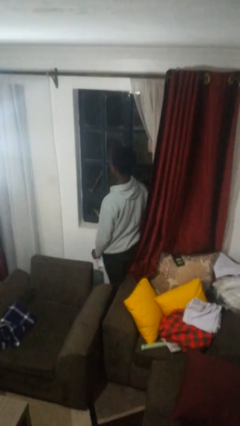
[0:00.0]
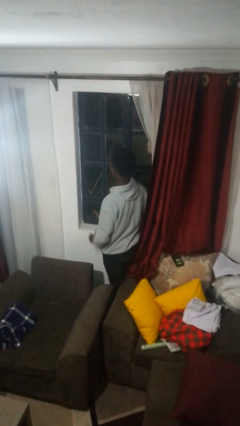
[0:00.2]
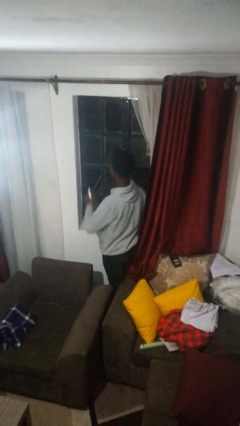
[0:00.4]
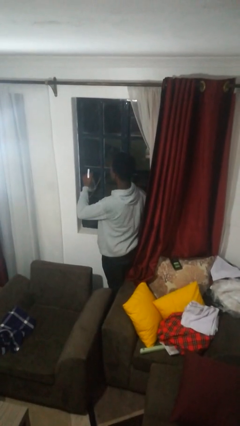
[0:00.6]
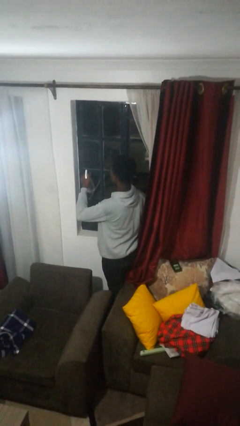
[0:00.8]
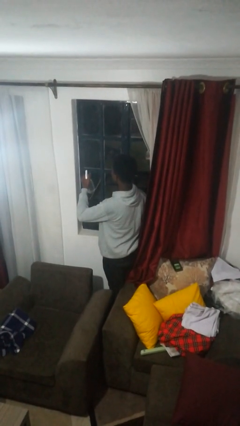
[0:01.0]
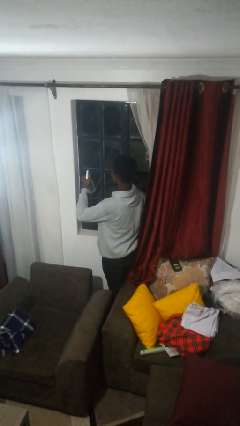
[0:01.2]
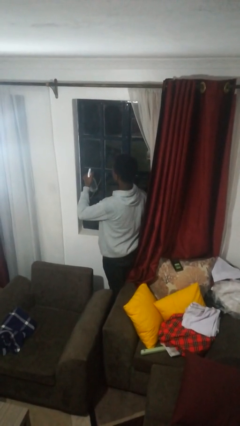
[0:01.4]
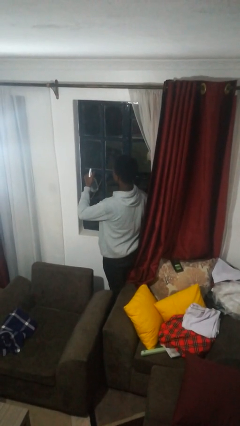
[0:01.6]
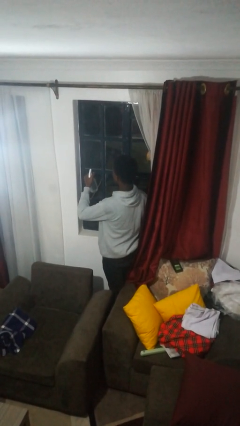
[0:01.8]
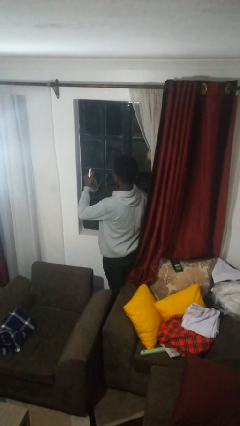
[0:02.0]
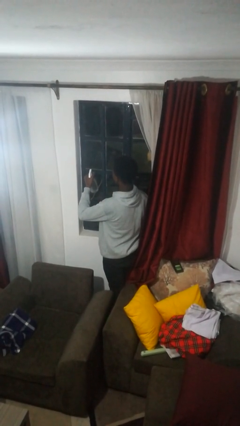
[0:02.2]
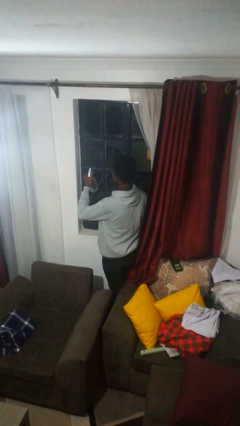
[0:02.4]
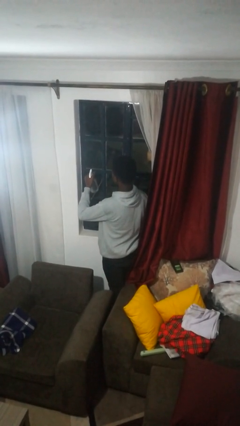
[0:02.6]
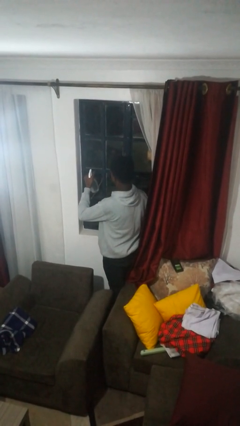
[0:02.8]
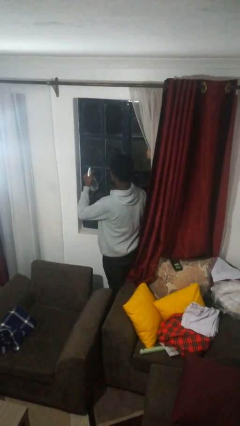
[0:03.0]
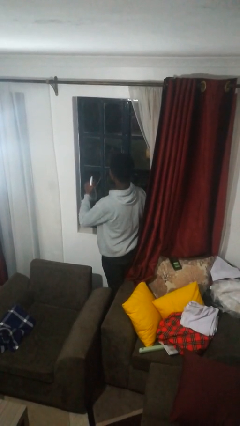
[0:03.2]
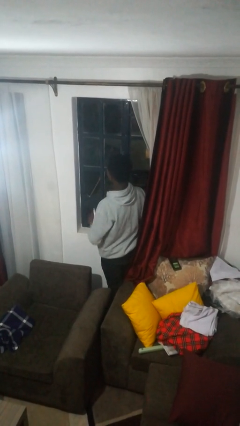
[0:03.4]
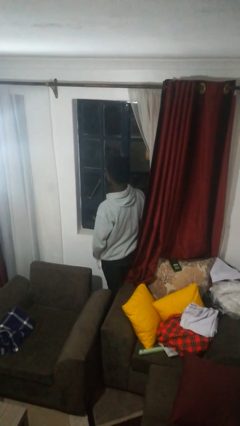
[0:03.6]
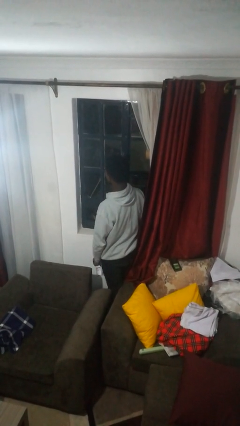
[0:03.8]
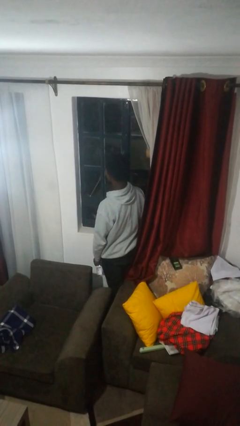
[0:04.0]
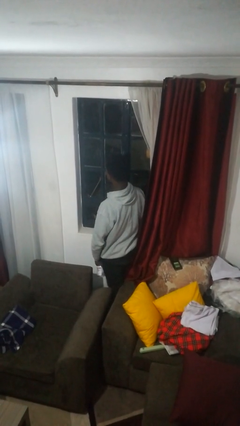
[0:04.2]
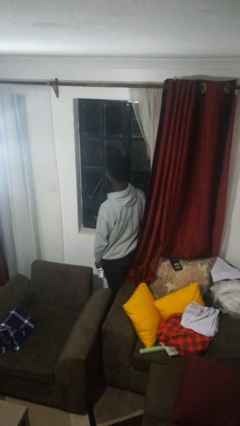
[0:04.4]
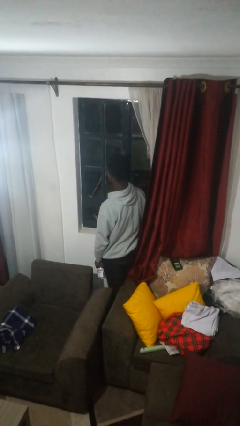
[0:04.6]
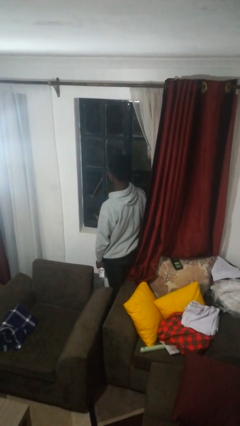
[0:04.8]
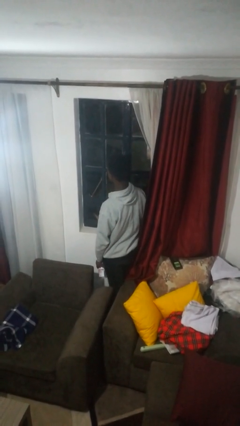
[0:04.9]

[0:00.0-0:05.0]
person sprays from bottle

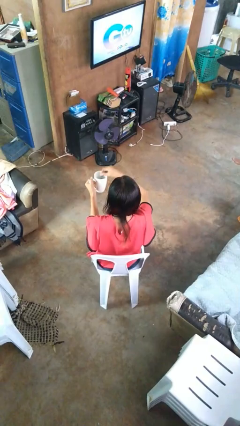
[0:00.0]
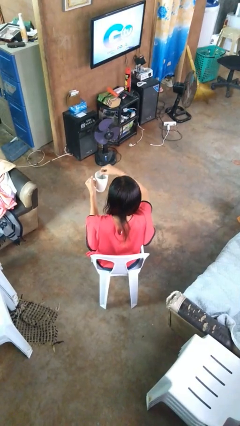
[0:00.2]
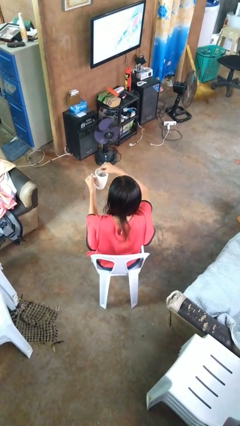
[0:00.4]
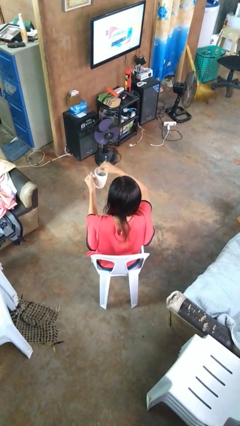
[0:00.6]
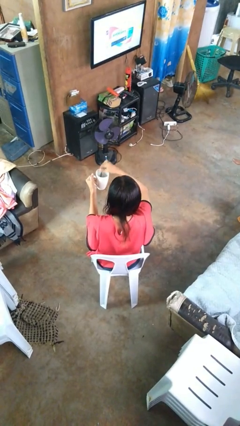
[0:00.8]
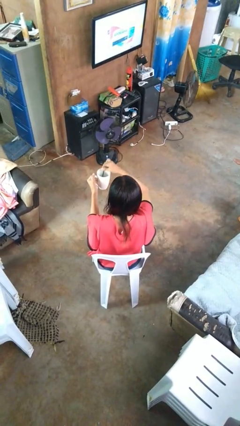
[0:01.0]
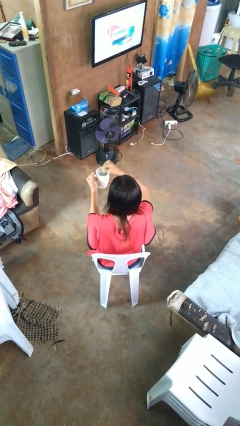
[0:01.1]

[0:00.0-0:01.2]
person stirs mug

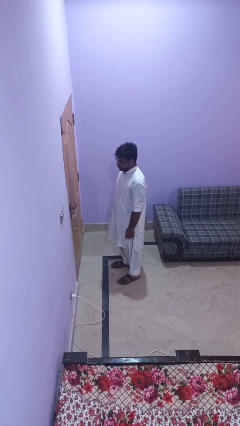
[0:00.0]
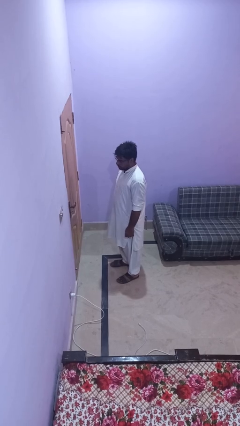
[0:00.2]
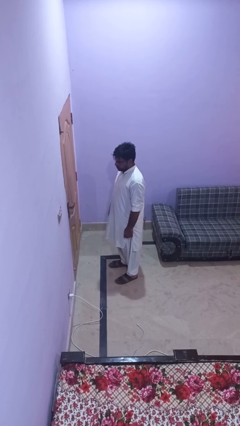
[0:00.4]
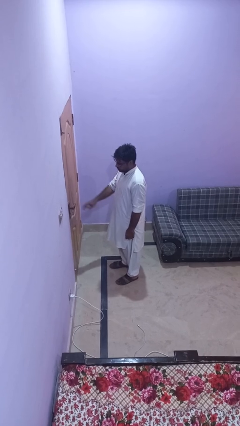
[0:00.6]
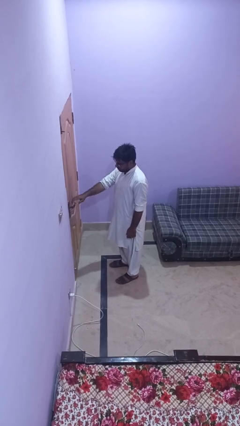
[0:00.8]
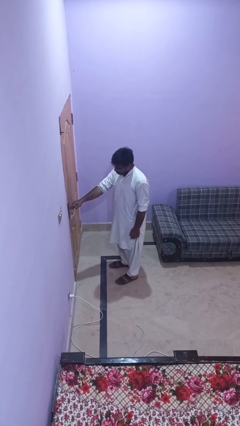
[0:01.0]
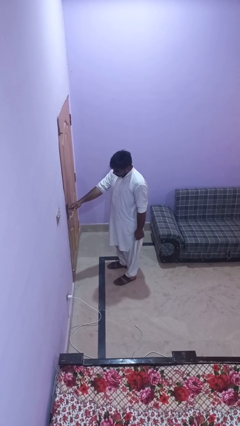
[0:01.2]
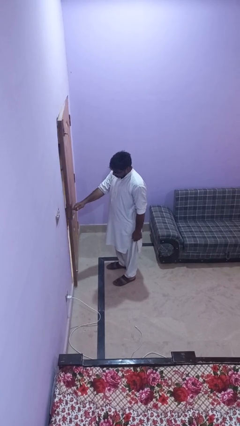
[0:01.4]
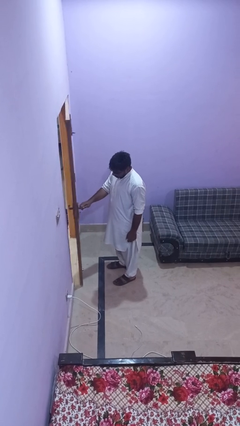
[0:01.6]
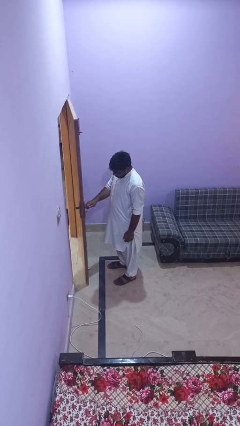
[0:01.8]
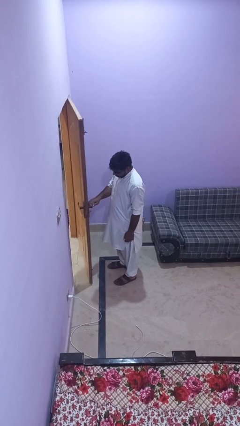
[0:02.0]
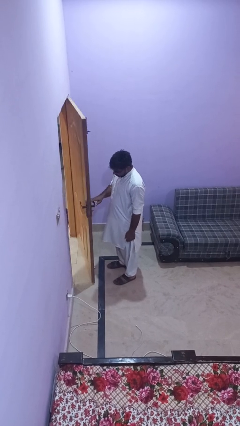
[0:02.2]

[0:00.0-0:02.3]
person opens facility door

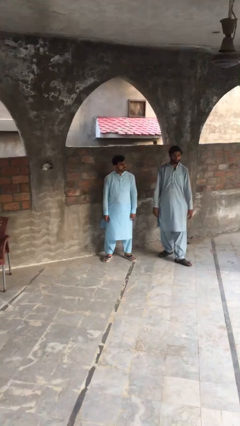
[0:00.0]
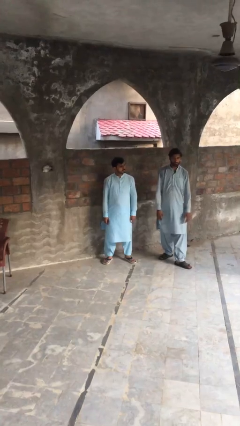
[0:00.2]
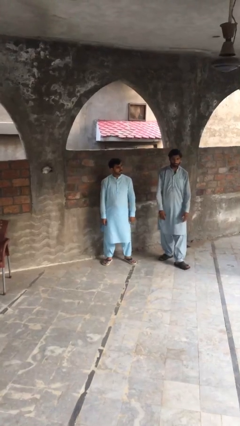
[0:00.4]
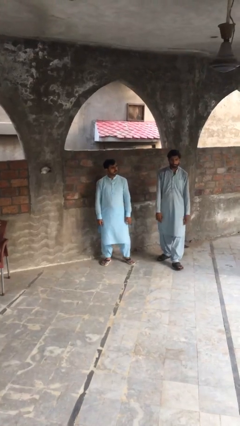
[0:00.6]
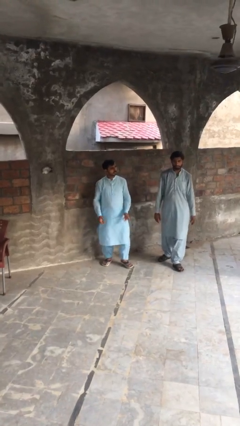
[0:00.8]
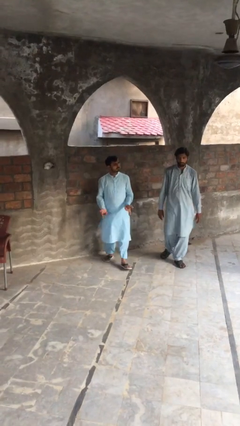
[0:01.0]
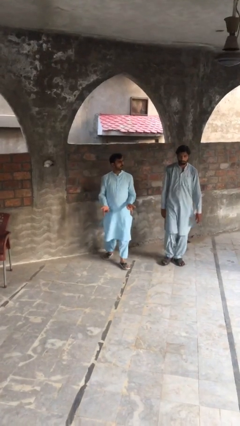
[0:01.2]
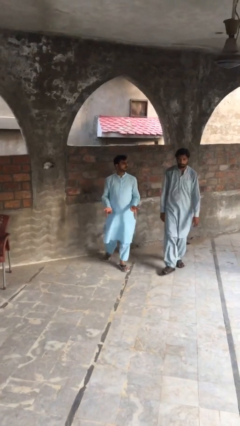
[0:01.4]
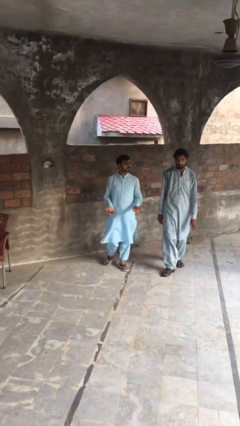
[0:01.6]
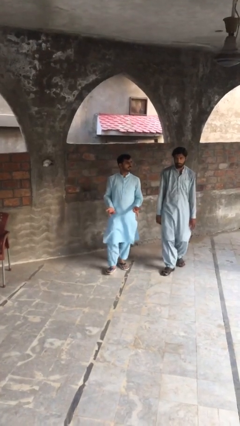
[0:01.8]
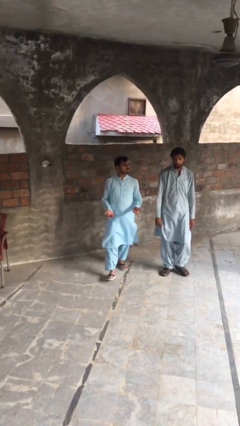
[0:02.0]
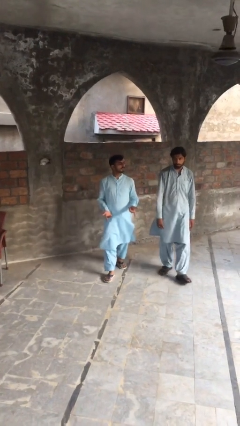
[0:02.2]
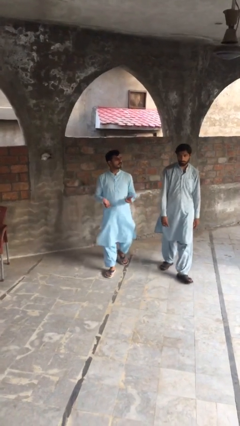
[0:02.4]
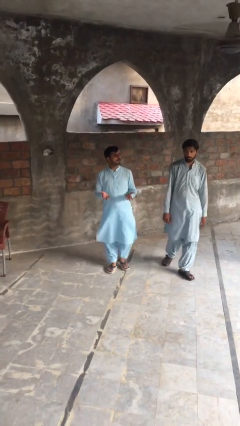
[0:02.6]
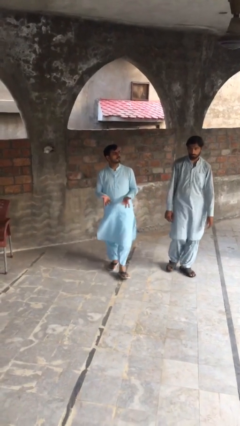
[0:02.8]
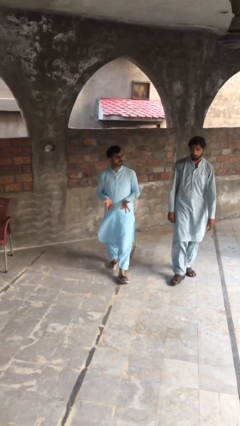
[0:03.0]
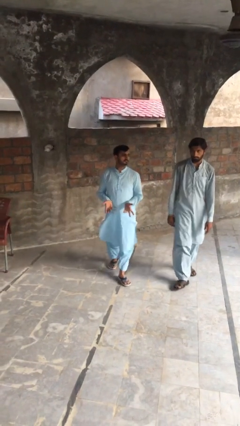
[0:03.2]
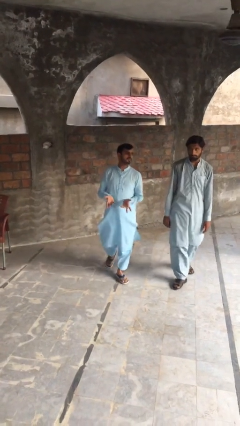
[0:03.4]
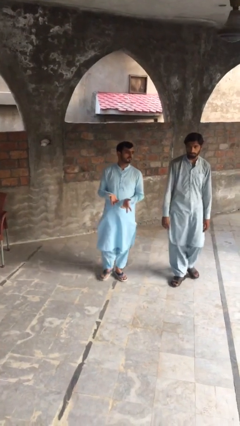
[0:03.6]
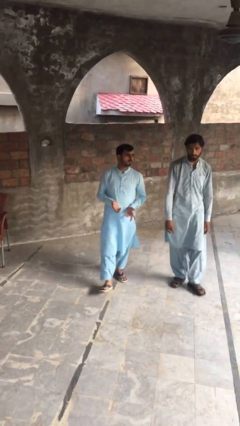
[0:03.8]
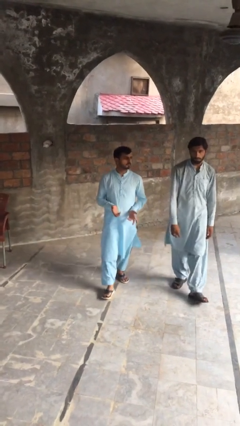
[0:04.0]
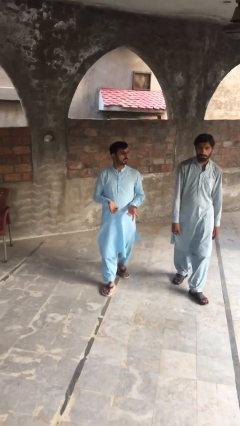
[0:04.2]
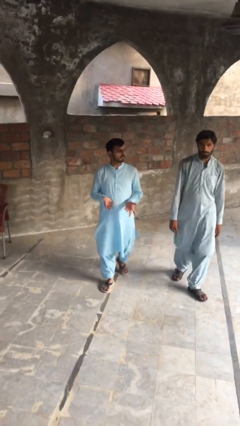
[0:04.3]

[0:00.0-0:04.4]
person talks to person

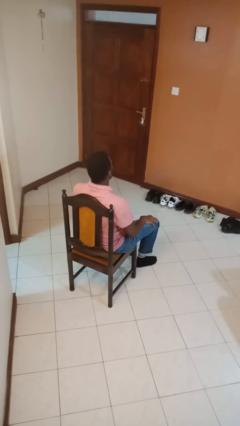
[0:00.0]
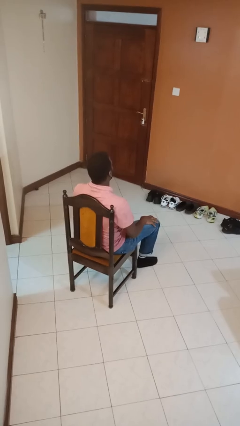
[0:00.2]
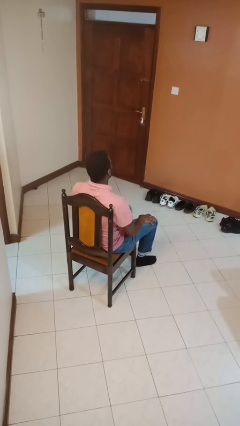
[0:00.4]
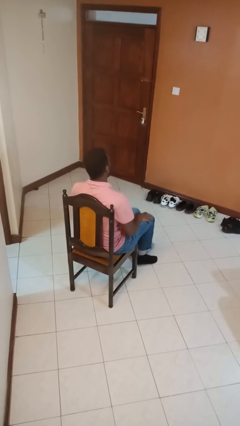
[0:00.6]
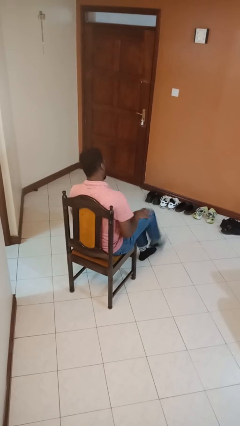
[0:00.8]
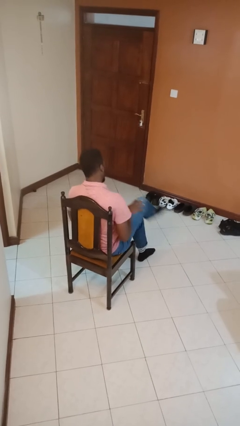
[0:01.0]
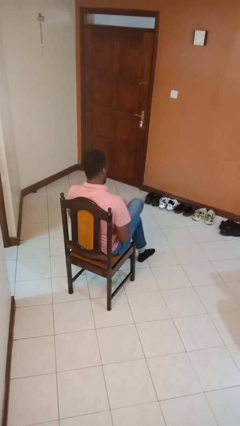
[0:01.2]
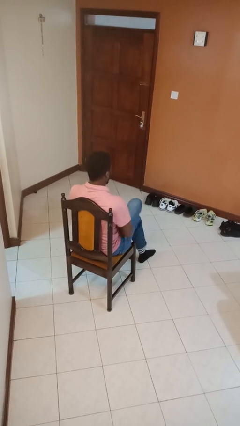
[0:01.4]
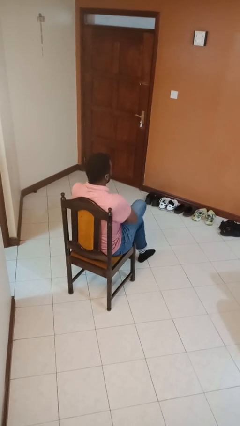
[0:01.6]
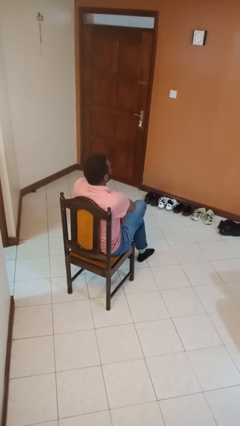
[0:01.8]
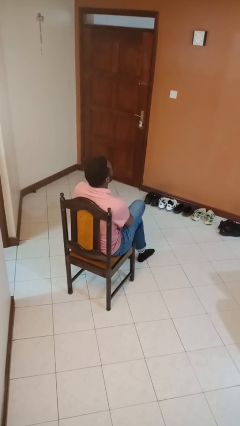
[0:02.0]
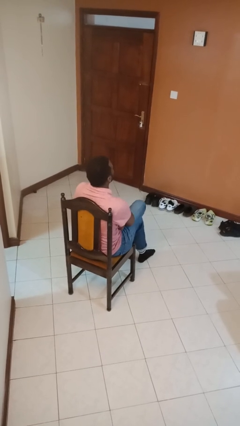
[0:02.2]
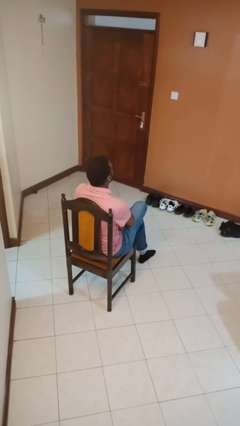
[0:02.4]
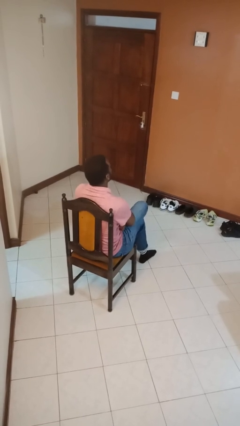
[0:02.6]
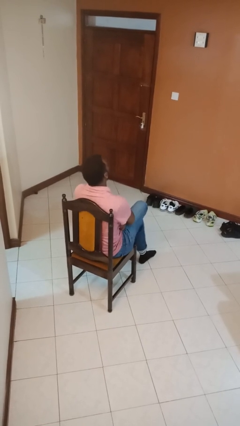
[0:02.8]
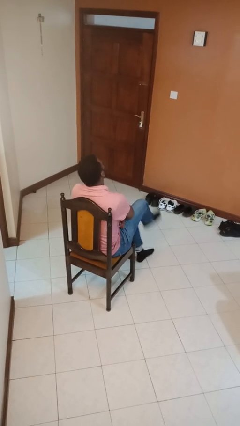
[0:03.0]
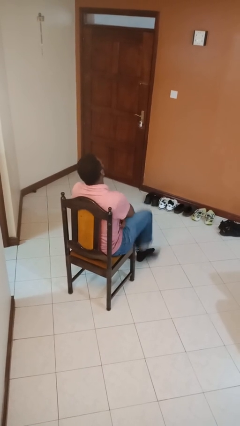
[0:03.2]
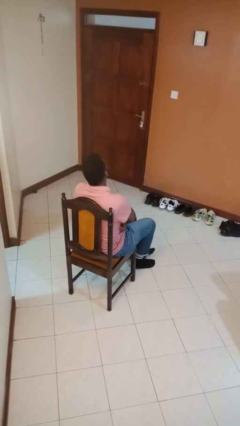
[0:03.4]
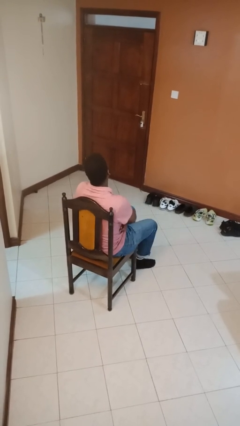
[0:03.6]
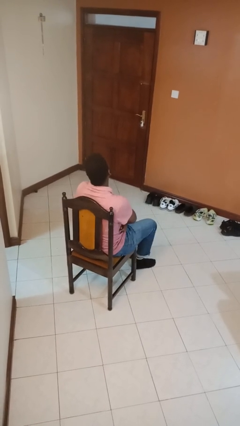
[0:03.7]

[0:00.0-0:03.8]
person crosses legs

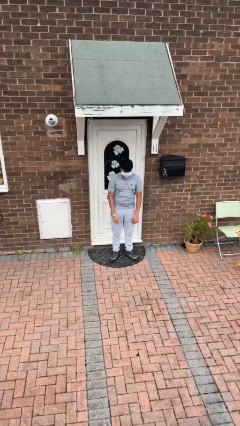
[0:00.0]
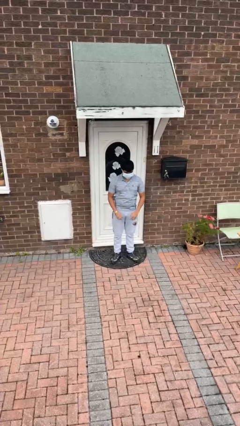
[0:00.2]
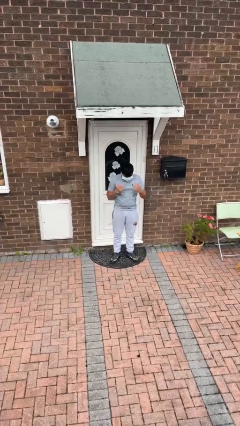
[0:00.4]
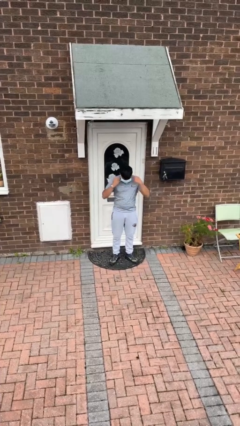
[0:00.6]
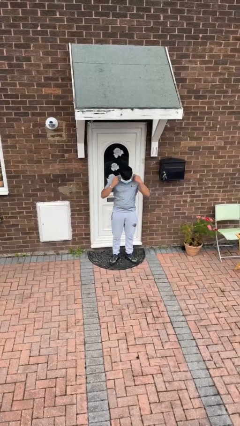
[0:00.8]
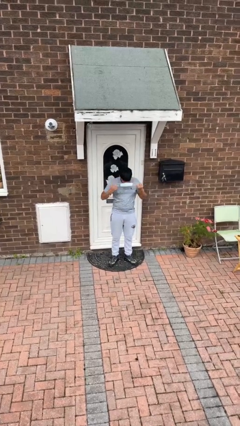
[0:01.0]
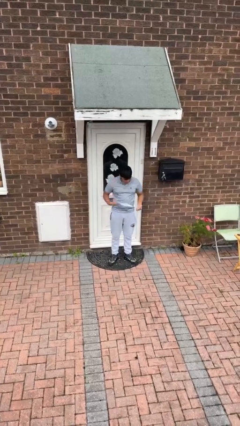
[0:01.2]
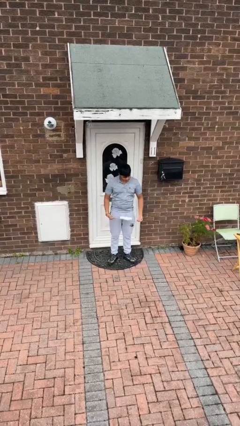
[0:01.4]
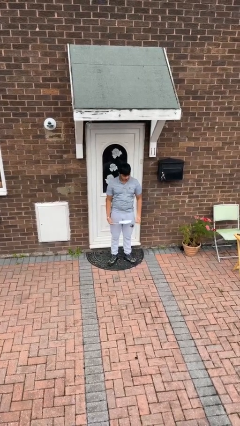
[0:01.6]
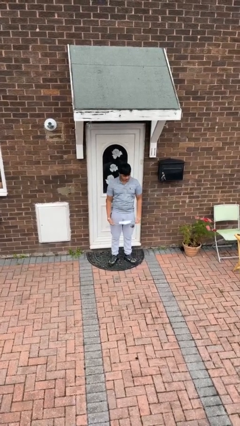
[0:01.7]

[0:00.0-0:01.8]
person takes off facemask
